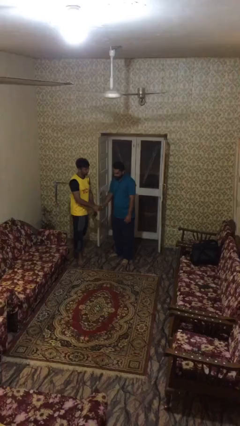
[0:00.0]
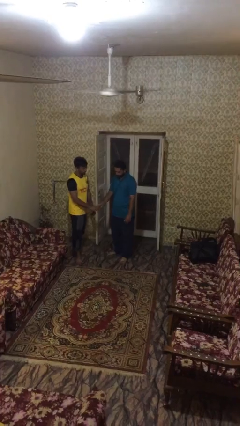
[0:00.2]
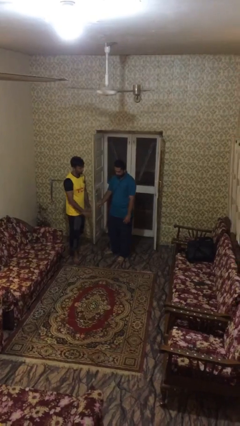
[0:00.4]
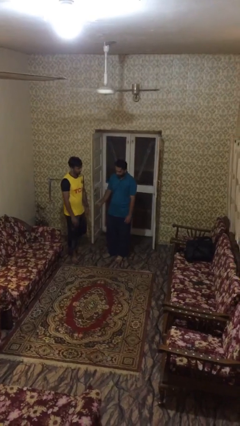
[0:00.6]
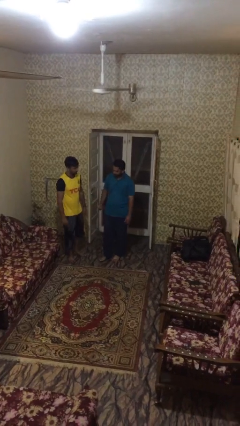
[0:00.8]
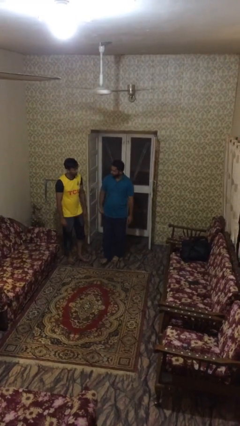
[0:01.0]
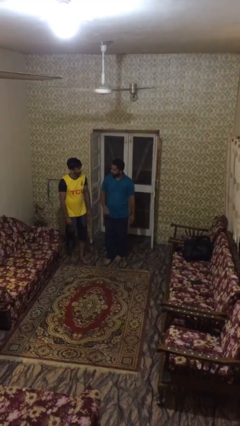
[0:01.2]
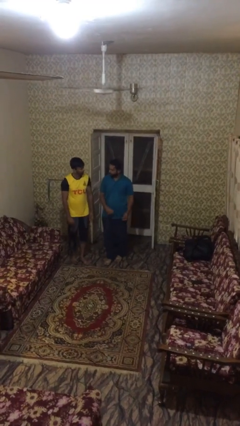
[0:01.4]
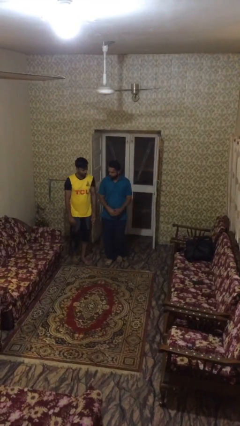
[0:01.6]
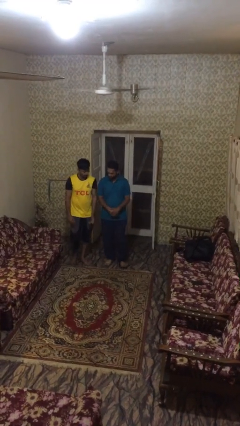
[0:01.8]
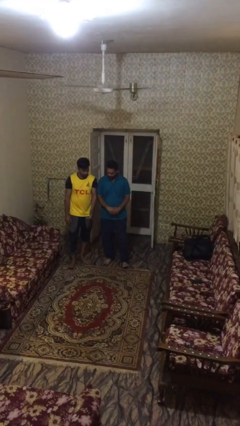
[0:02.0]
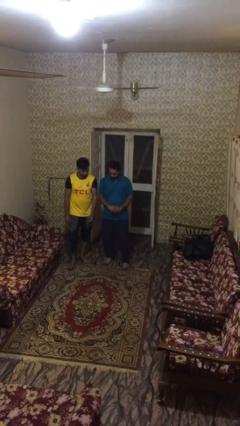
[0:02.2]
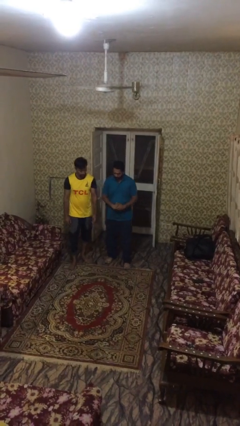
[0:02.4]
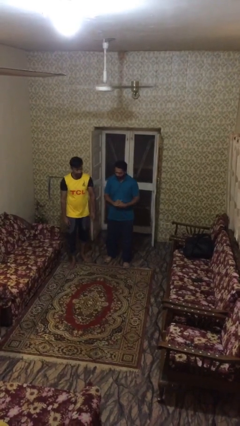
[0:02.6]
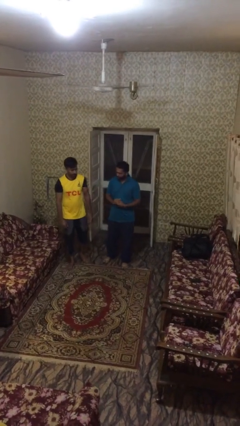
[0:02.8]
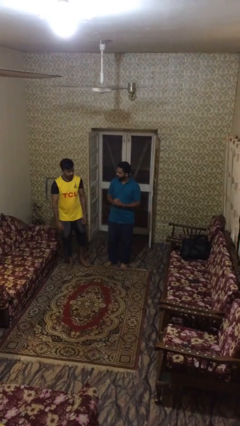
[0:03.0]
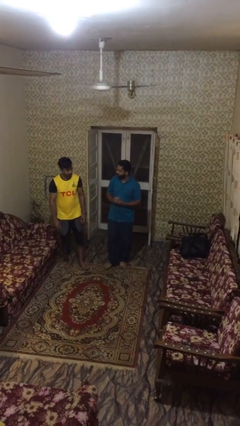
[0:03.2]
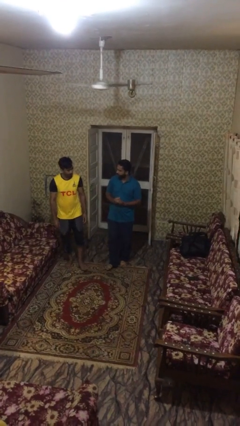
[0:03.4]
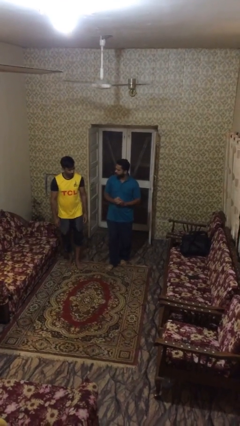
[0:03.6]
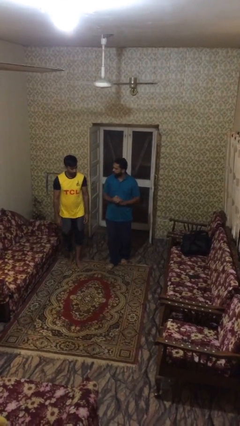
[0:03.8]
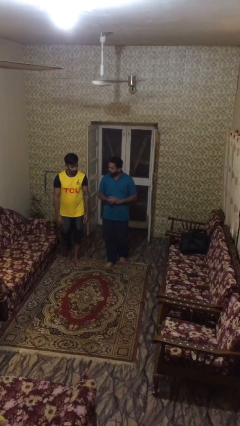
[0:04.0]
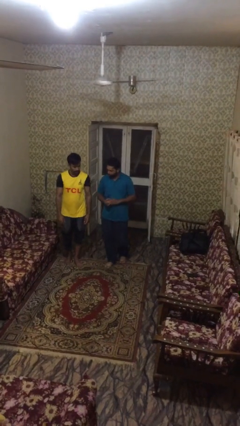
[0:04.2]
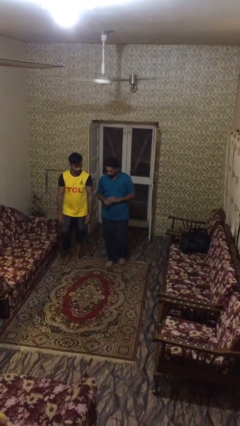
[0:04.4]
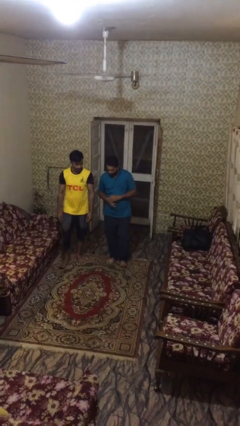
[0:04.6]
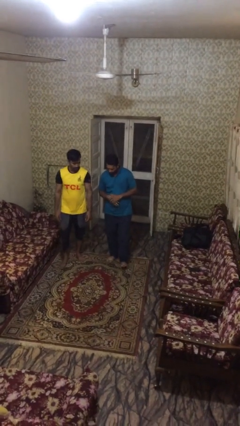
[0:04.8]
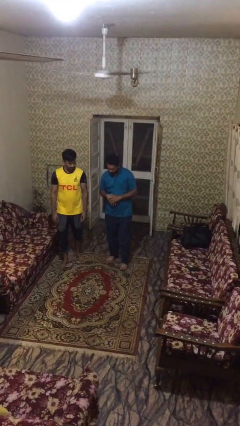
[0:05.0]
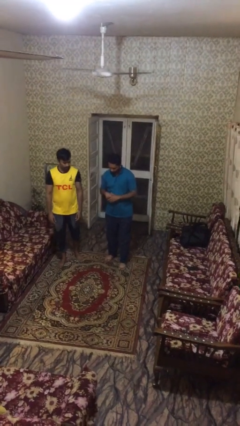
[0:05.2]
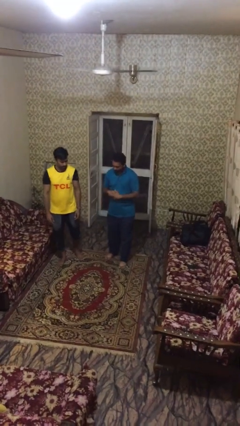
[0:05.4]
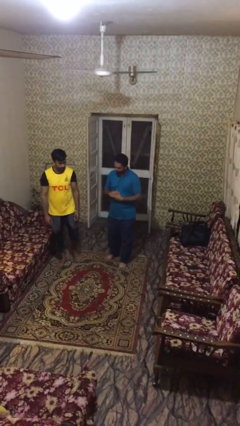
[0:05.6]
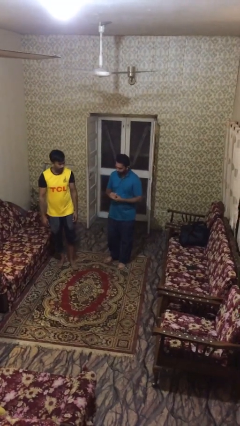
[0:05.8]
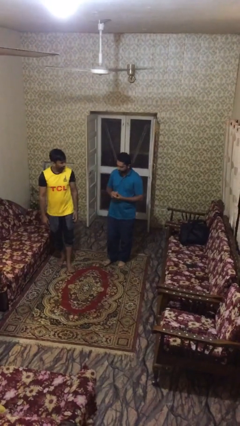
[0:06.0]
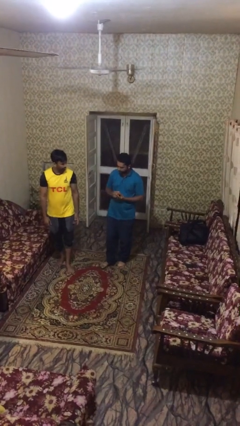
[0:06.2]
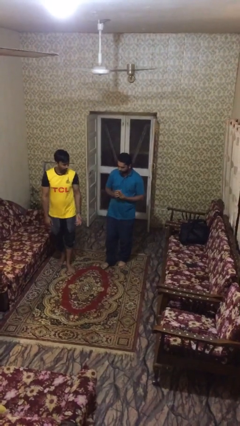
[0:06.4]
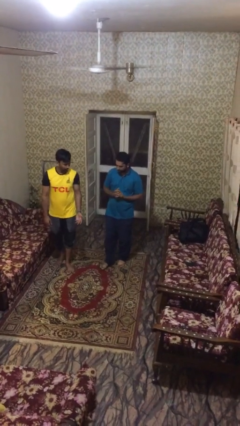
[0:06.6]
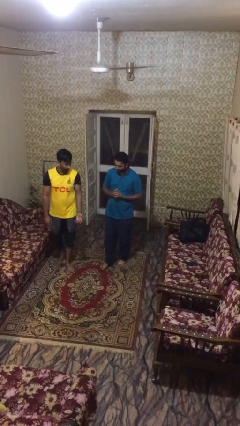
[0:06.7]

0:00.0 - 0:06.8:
person talks to person

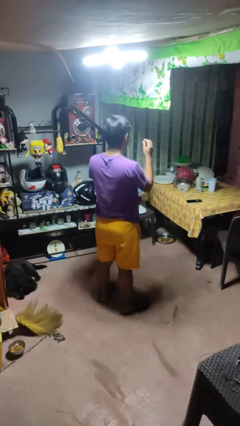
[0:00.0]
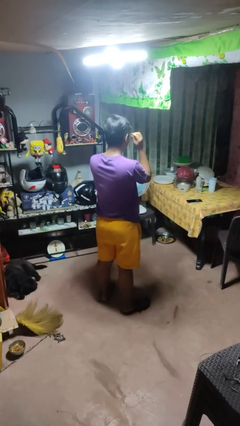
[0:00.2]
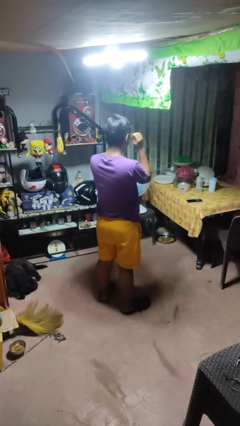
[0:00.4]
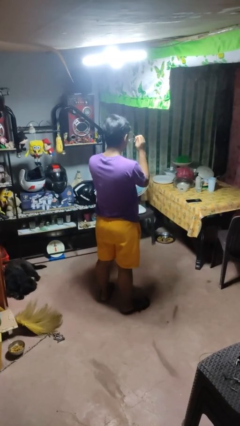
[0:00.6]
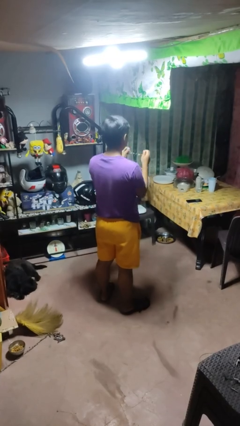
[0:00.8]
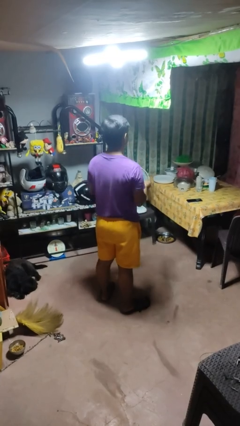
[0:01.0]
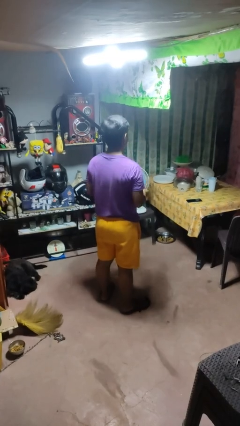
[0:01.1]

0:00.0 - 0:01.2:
person takes off glasses

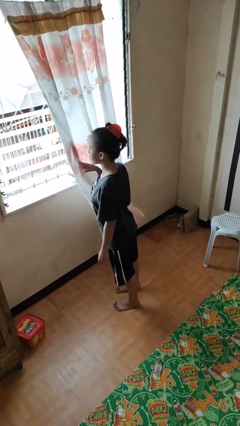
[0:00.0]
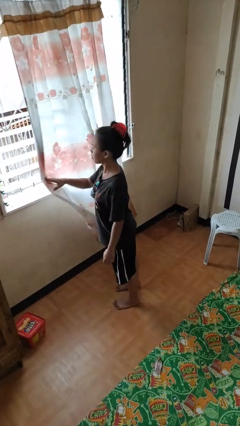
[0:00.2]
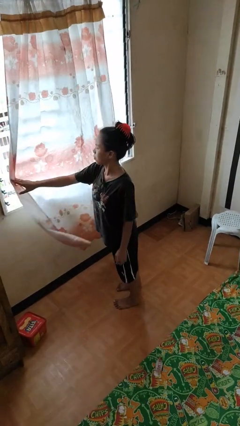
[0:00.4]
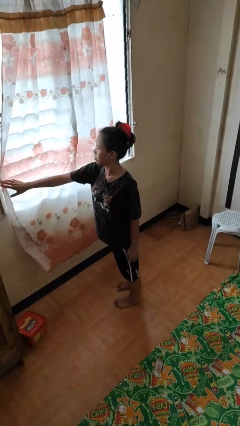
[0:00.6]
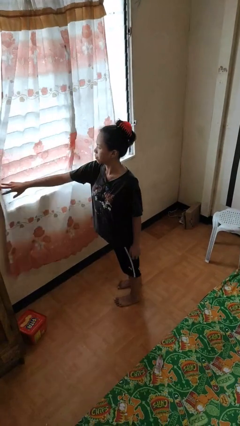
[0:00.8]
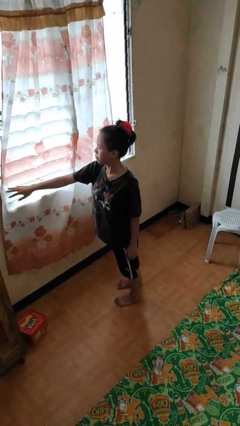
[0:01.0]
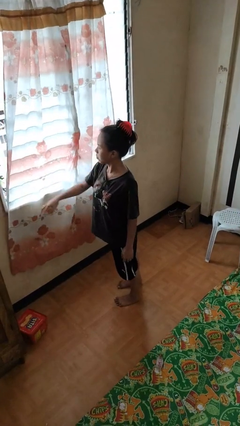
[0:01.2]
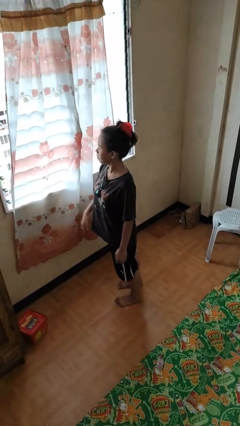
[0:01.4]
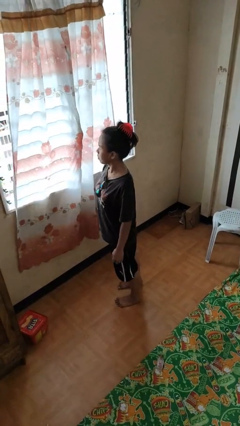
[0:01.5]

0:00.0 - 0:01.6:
person closes curtains

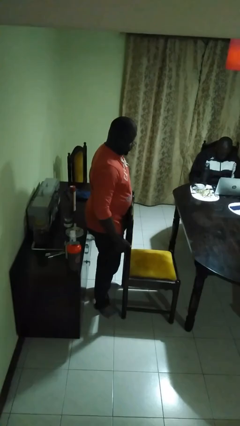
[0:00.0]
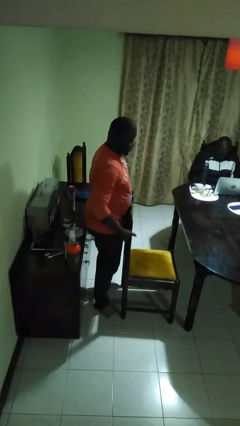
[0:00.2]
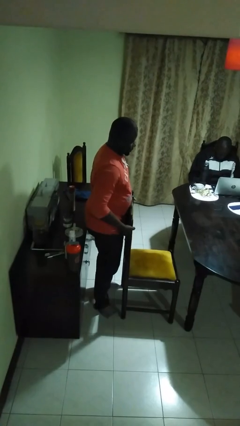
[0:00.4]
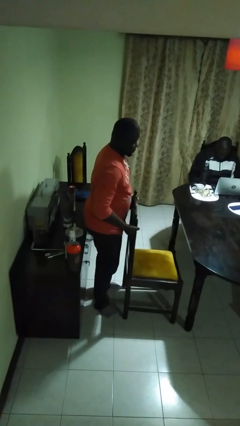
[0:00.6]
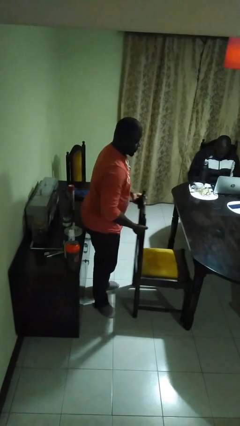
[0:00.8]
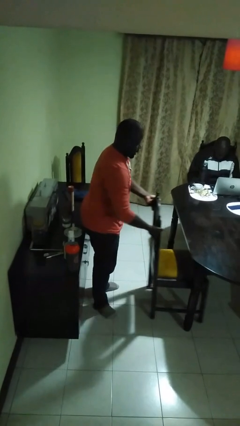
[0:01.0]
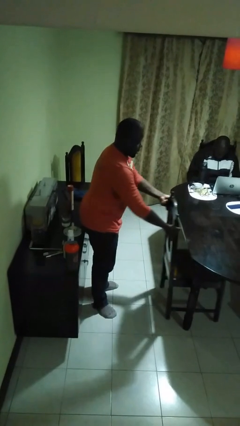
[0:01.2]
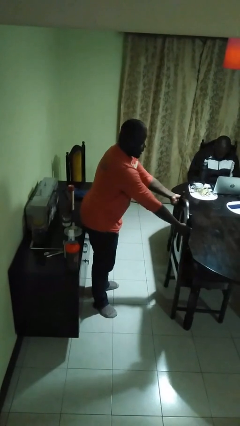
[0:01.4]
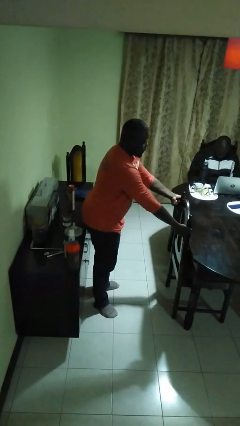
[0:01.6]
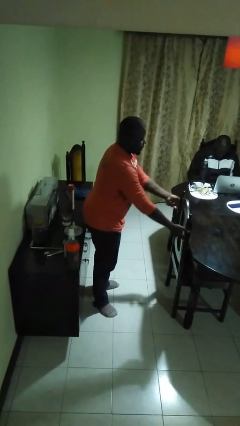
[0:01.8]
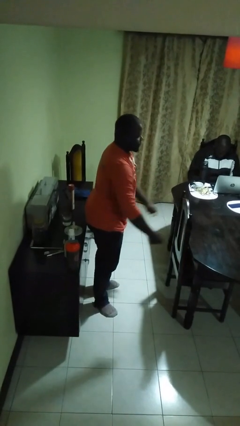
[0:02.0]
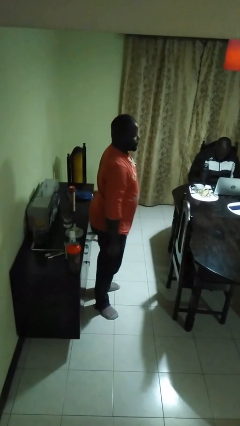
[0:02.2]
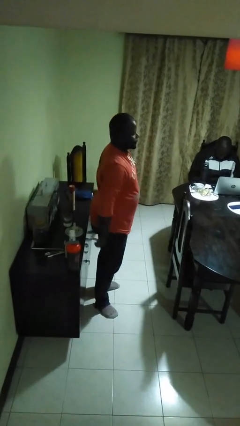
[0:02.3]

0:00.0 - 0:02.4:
person pushes in chair

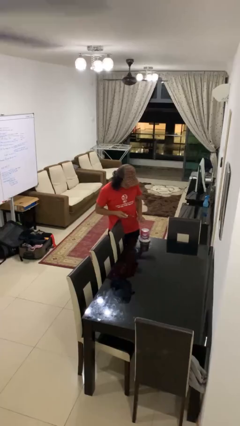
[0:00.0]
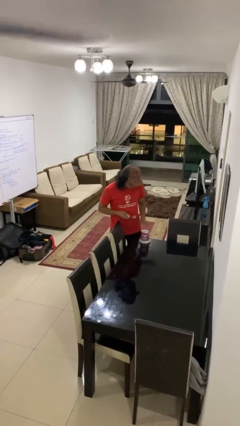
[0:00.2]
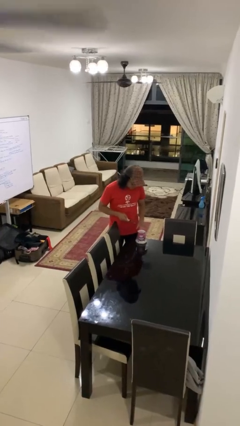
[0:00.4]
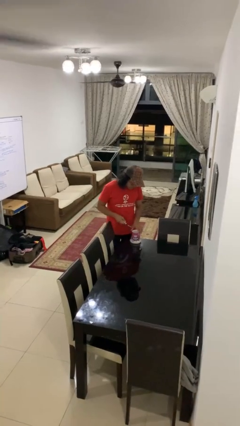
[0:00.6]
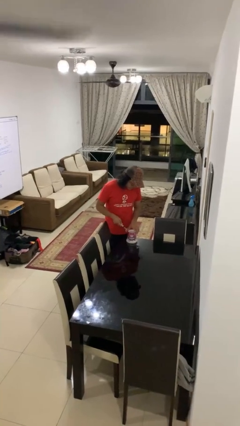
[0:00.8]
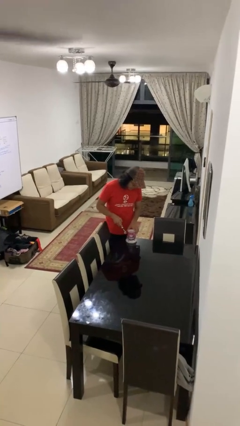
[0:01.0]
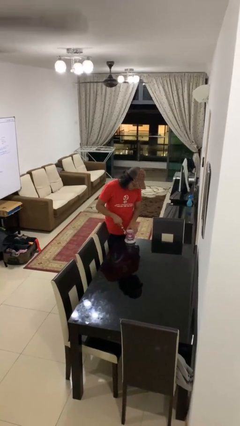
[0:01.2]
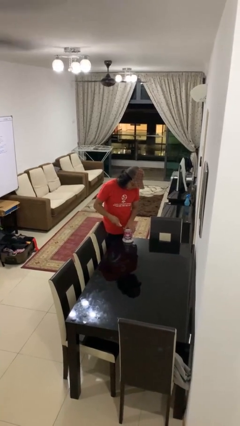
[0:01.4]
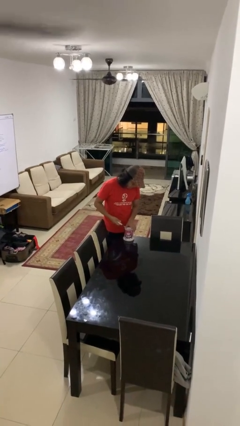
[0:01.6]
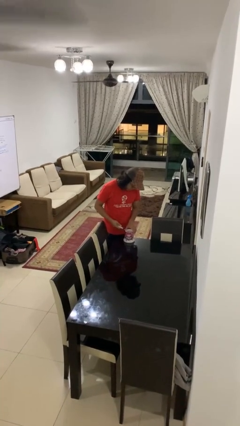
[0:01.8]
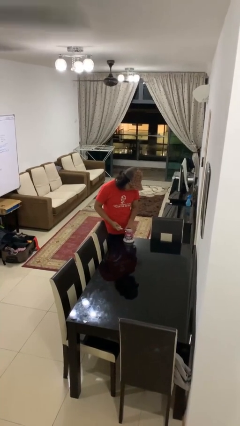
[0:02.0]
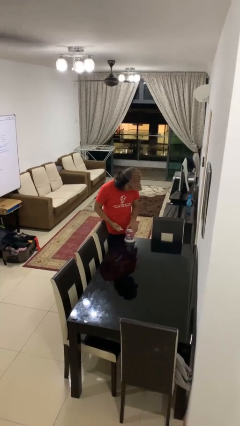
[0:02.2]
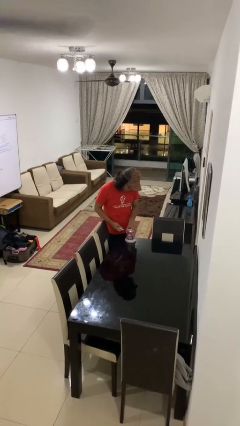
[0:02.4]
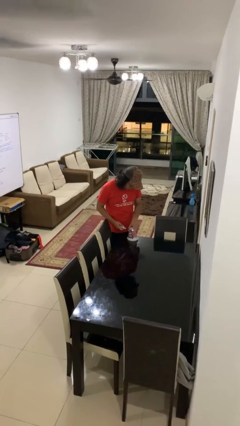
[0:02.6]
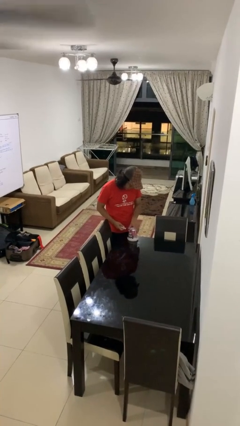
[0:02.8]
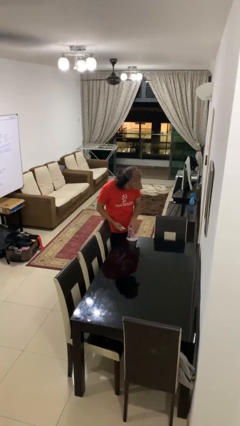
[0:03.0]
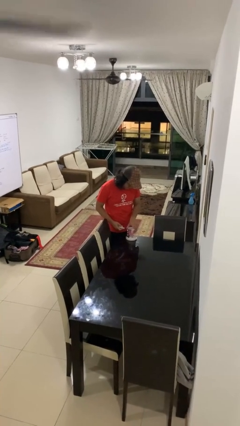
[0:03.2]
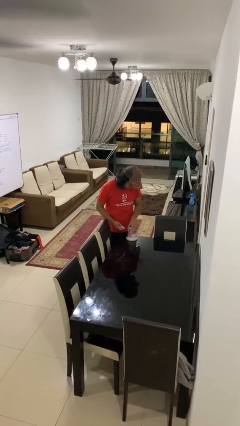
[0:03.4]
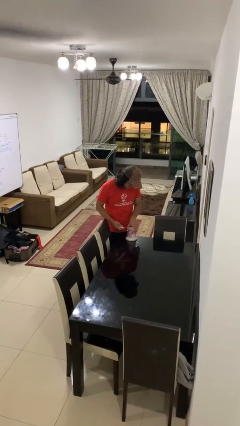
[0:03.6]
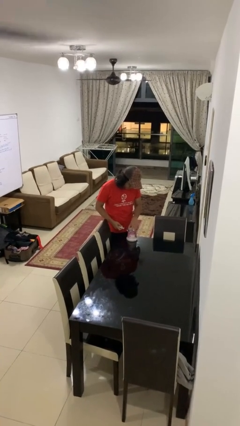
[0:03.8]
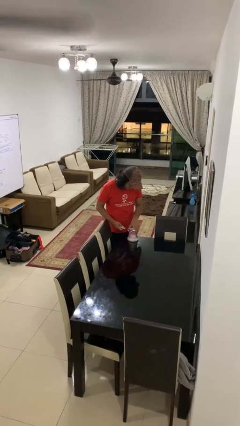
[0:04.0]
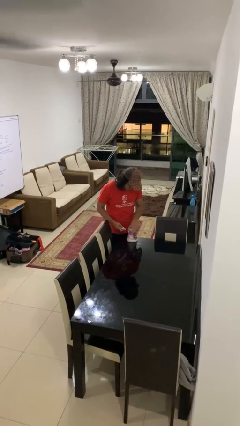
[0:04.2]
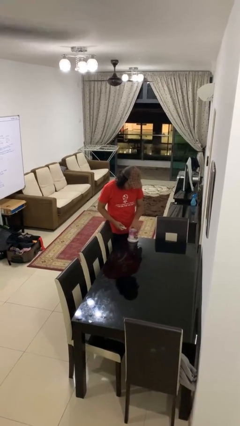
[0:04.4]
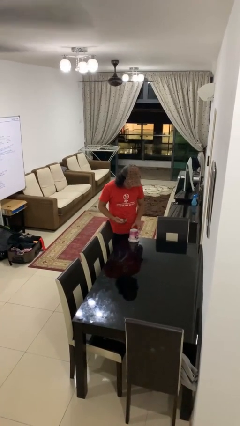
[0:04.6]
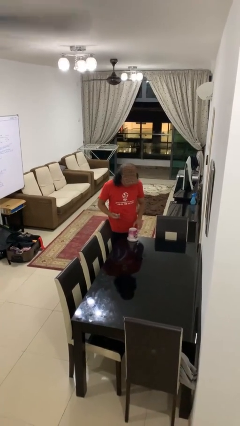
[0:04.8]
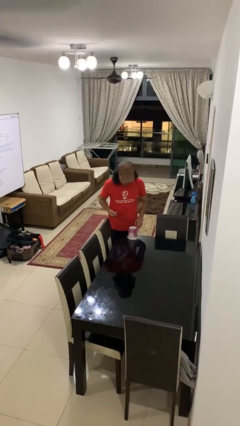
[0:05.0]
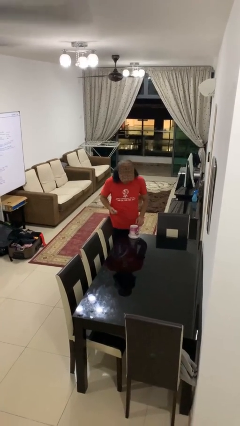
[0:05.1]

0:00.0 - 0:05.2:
person opens can with can opener

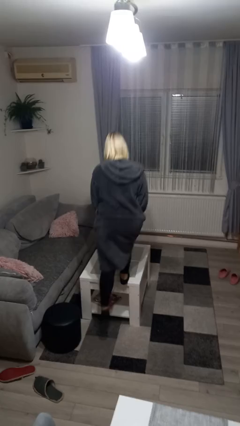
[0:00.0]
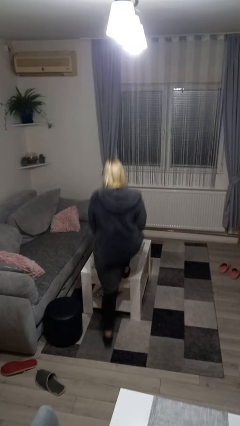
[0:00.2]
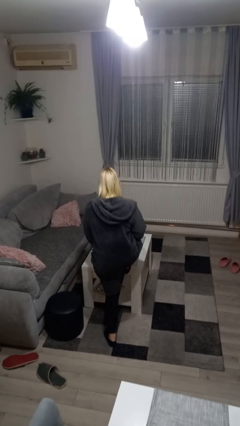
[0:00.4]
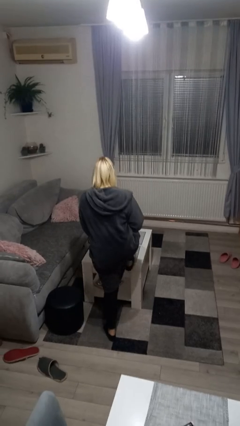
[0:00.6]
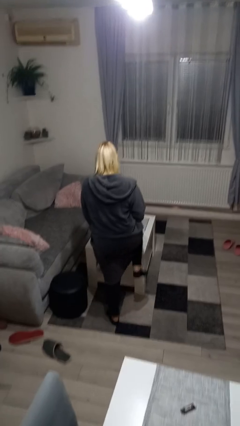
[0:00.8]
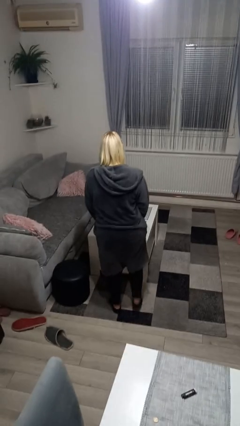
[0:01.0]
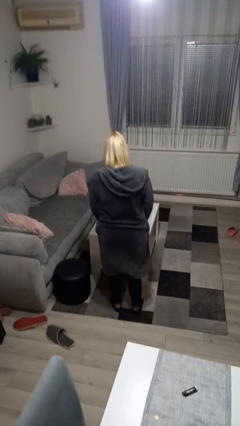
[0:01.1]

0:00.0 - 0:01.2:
person climbs off table
